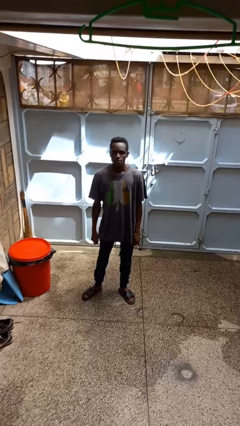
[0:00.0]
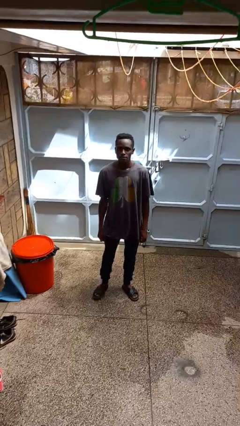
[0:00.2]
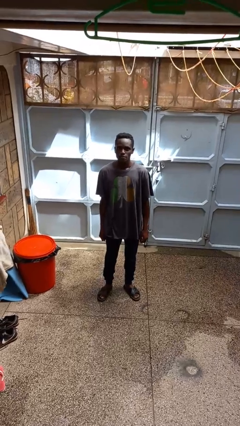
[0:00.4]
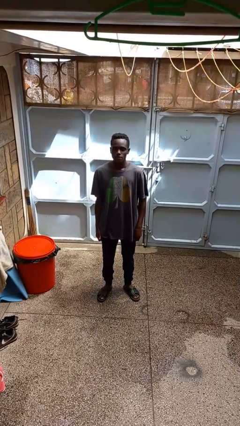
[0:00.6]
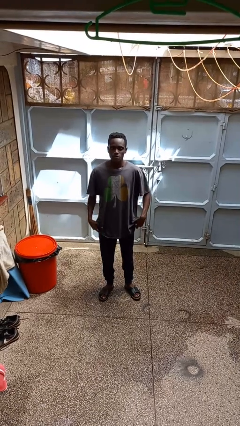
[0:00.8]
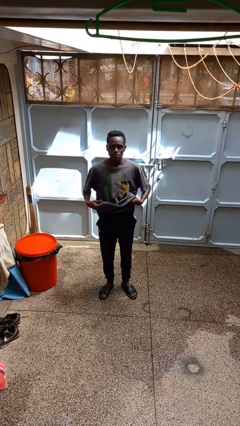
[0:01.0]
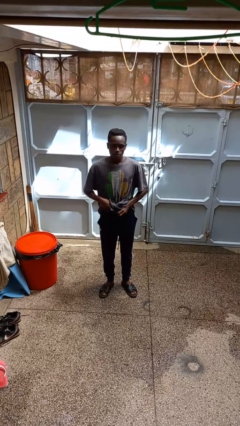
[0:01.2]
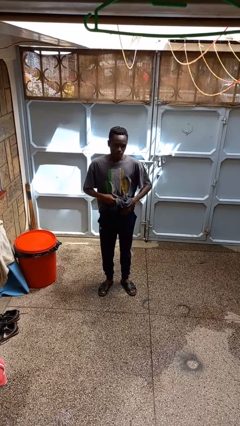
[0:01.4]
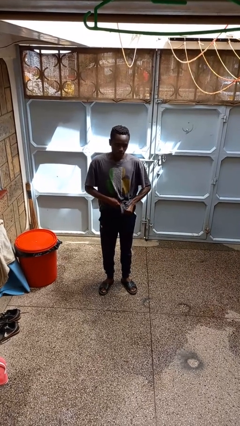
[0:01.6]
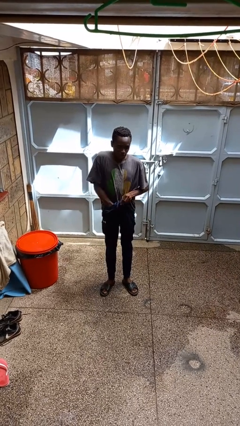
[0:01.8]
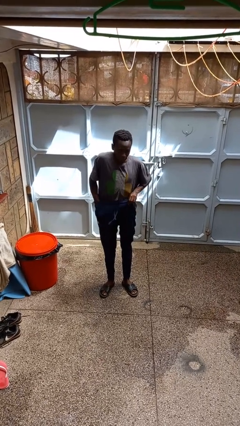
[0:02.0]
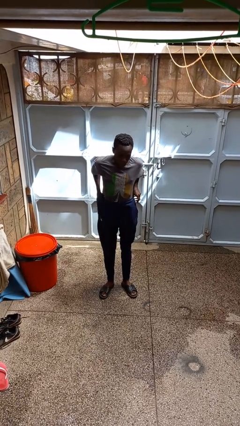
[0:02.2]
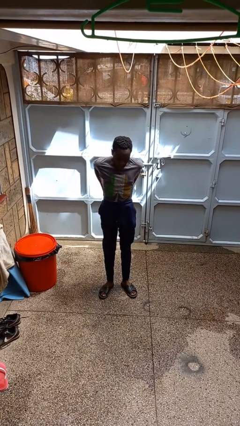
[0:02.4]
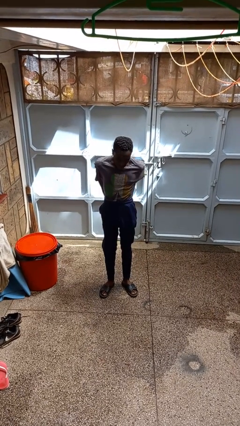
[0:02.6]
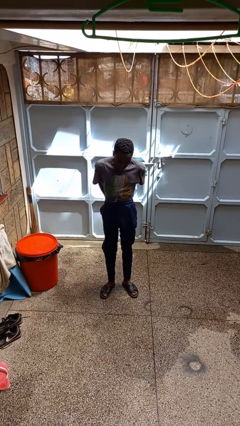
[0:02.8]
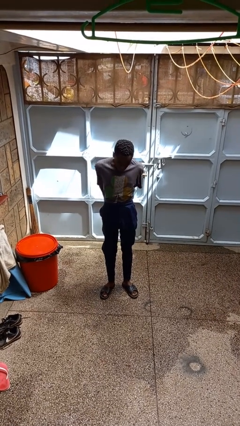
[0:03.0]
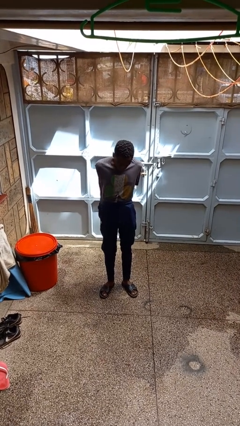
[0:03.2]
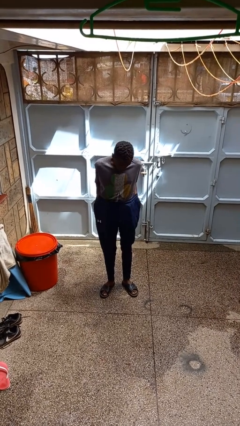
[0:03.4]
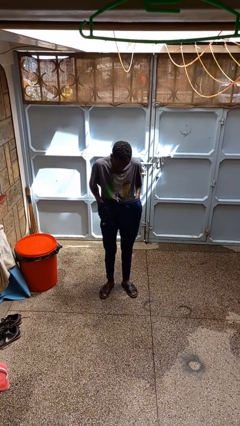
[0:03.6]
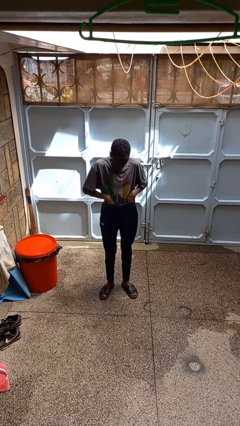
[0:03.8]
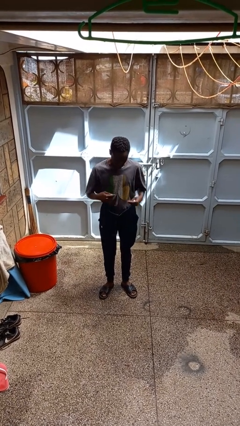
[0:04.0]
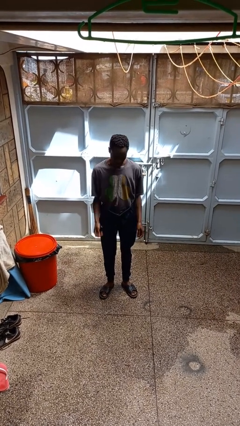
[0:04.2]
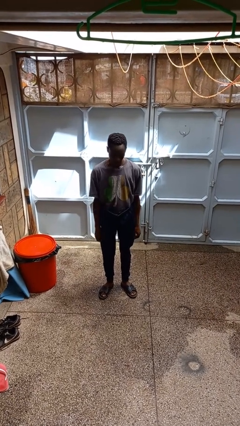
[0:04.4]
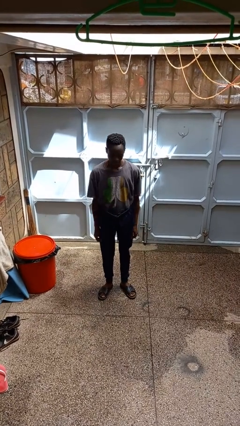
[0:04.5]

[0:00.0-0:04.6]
person tucks in shirt

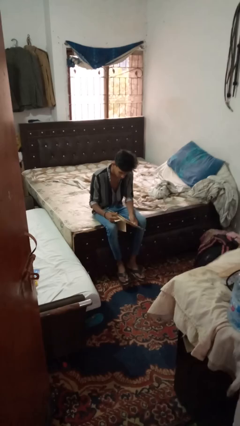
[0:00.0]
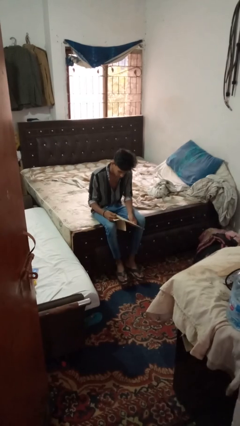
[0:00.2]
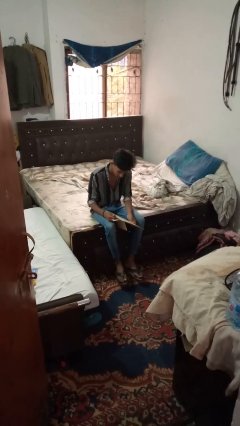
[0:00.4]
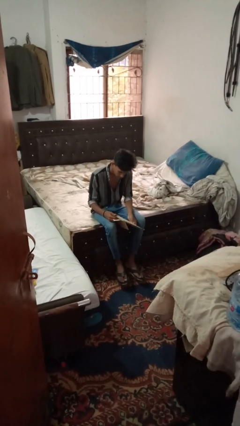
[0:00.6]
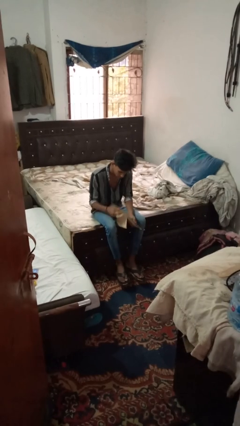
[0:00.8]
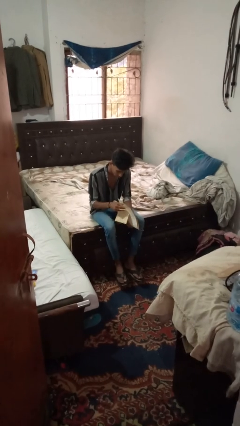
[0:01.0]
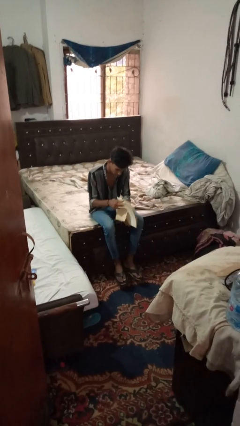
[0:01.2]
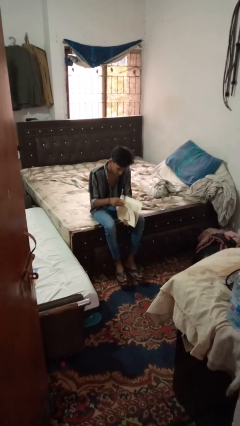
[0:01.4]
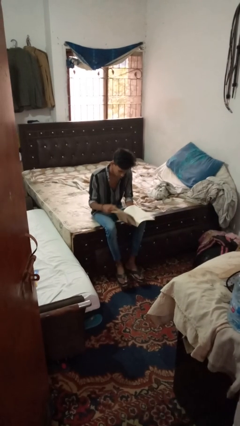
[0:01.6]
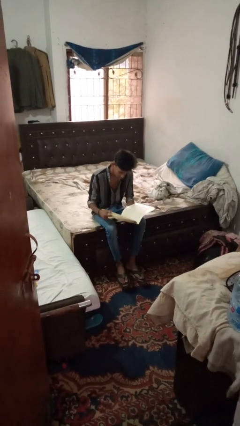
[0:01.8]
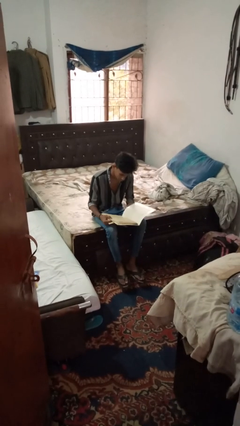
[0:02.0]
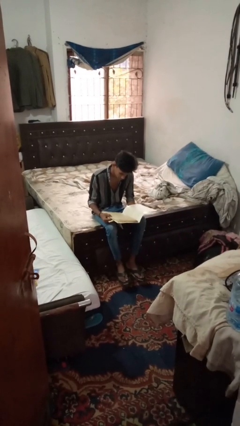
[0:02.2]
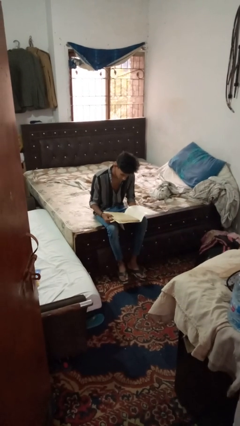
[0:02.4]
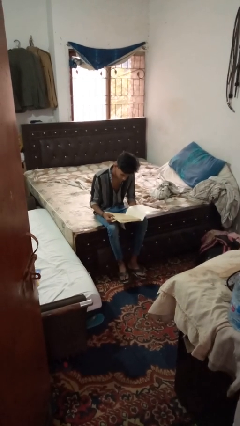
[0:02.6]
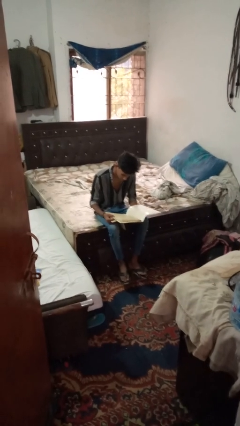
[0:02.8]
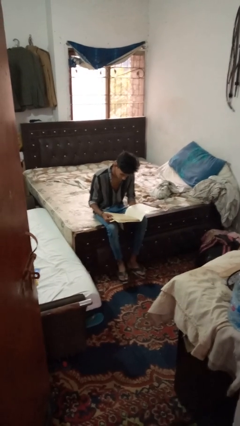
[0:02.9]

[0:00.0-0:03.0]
person reads magazine

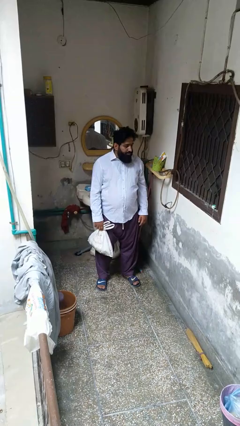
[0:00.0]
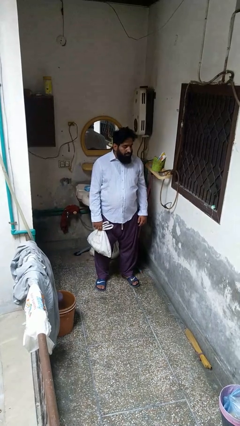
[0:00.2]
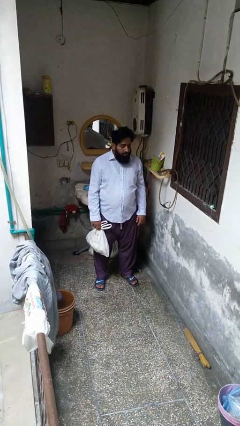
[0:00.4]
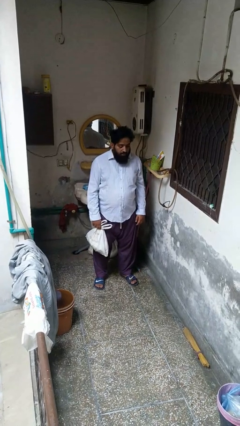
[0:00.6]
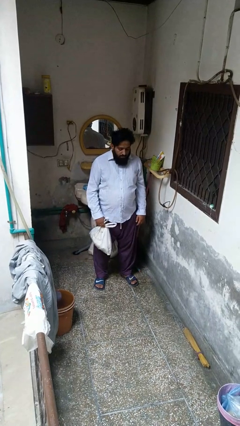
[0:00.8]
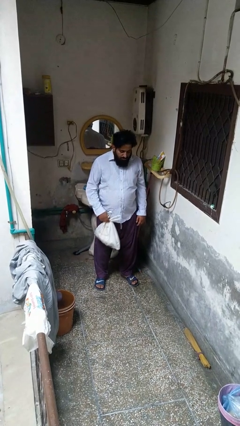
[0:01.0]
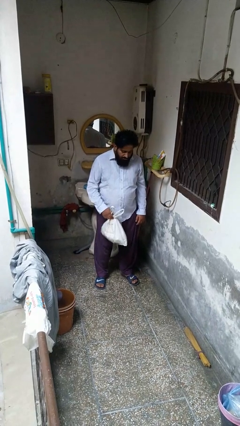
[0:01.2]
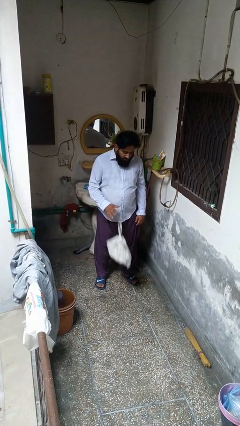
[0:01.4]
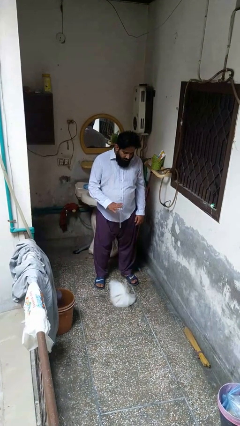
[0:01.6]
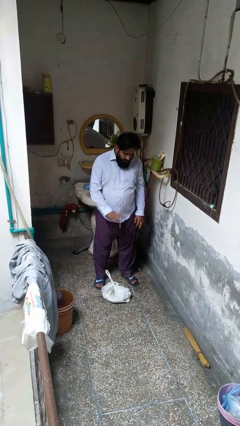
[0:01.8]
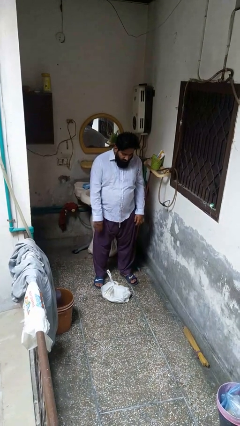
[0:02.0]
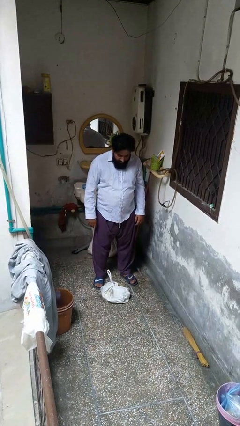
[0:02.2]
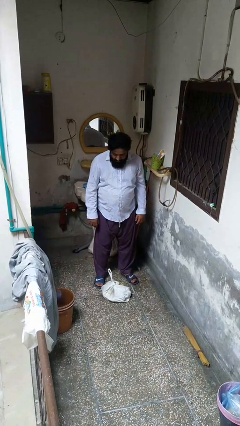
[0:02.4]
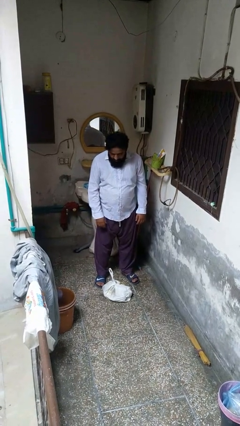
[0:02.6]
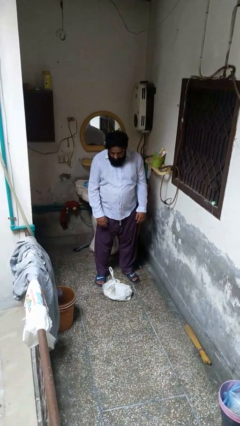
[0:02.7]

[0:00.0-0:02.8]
person throws object to ground

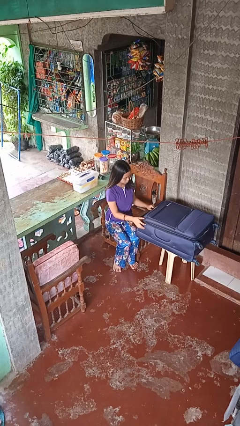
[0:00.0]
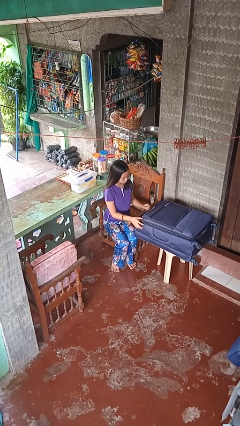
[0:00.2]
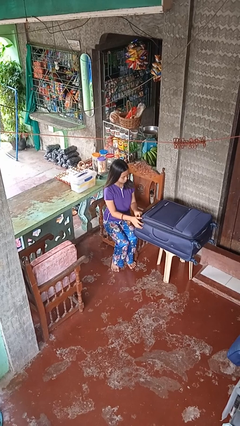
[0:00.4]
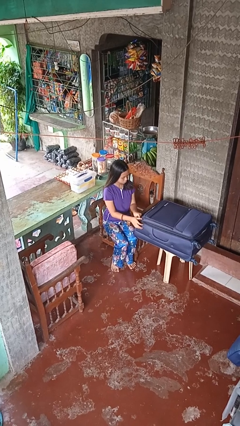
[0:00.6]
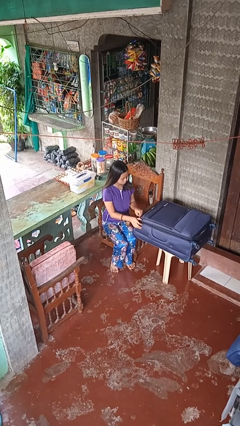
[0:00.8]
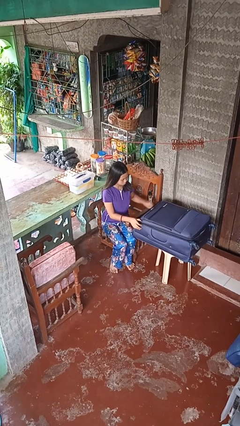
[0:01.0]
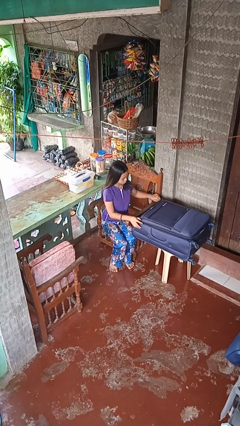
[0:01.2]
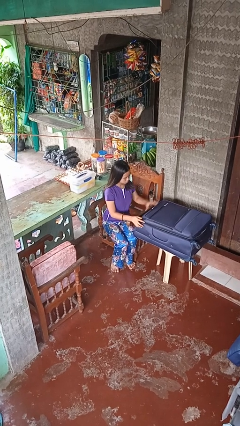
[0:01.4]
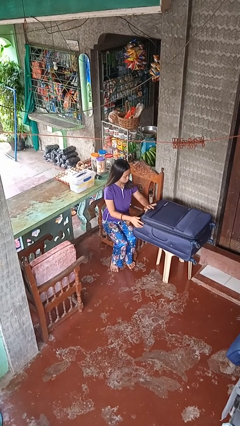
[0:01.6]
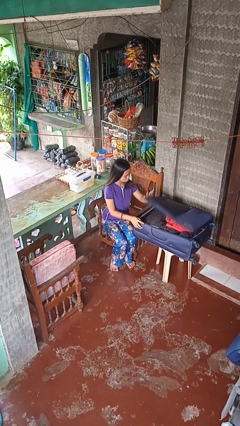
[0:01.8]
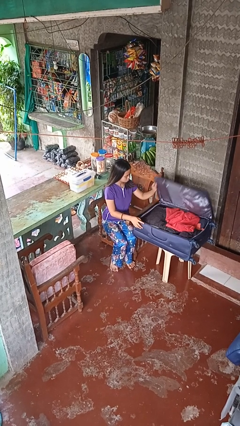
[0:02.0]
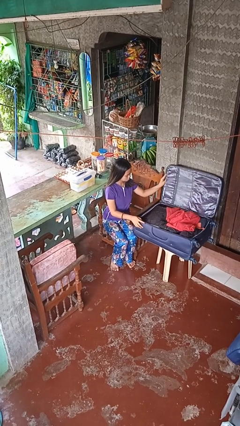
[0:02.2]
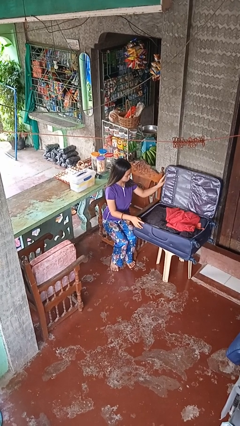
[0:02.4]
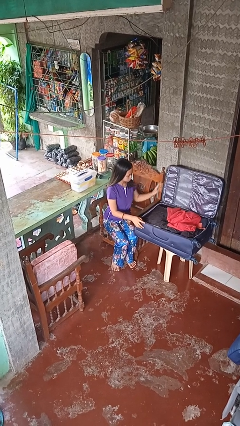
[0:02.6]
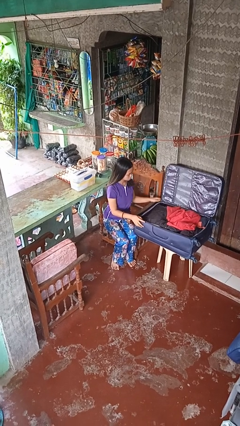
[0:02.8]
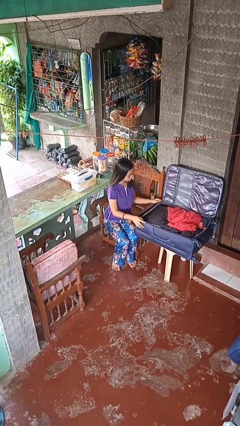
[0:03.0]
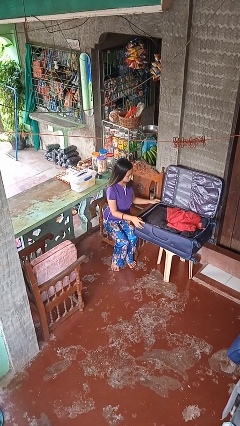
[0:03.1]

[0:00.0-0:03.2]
person opens suitcase

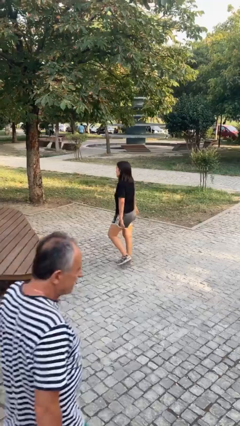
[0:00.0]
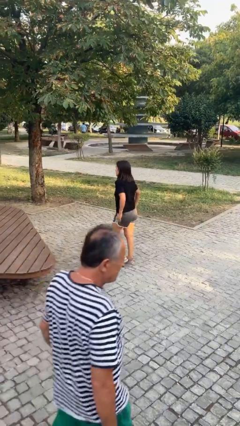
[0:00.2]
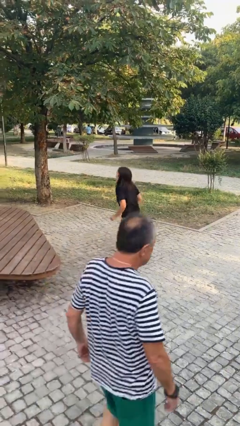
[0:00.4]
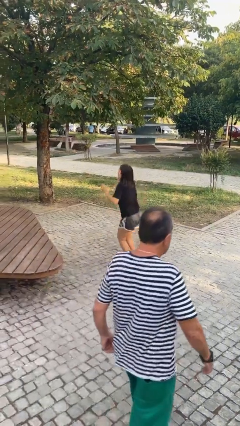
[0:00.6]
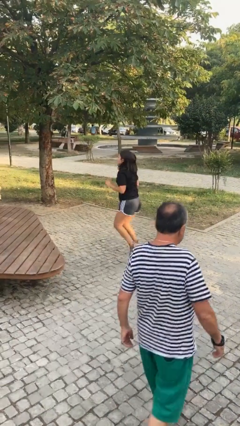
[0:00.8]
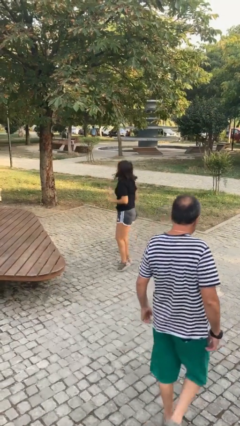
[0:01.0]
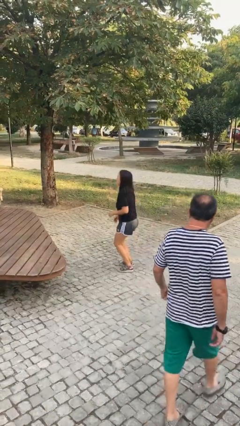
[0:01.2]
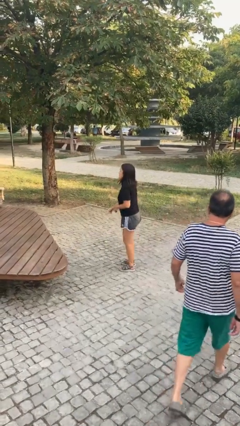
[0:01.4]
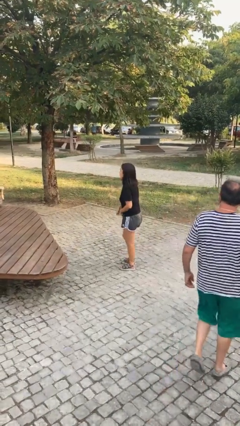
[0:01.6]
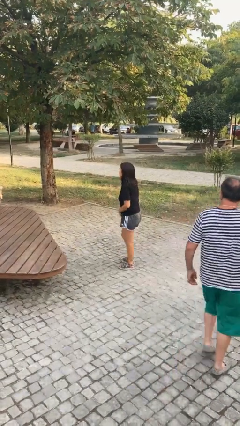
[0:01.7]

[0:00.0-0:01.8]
person jumps

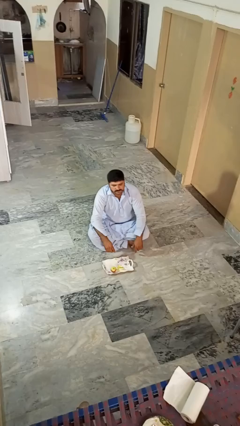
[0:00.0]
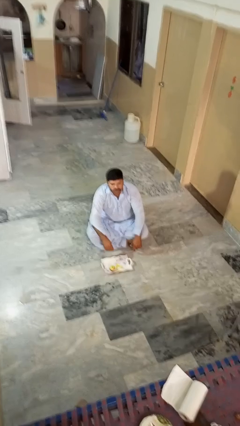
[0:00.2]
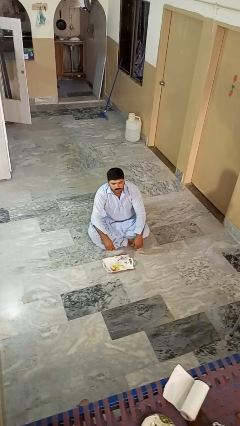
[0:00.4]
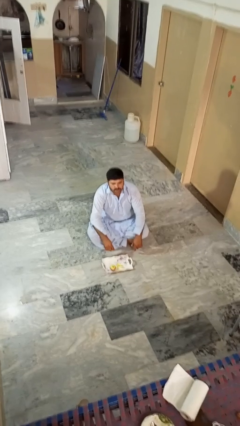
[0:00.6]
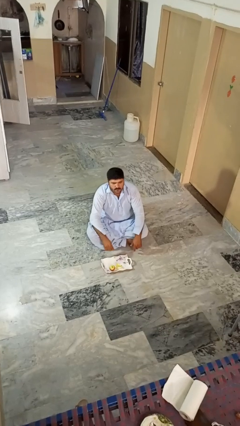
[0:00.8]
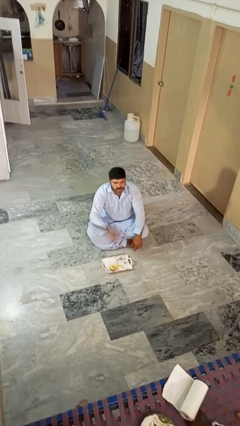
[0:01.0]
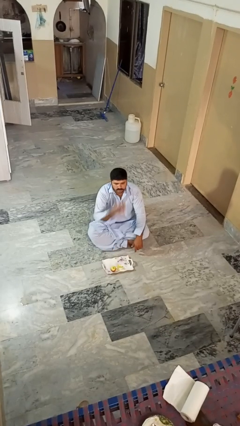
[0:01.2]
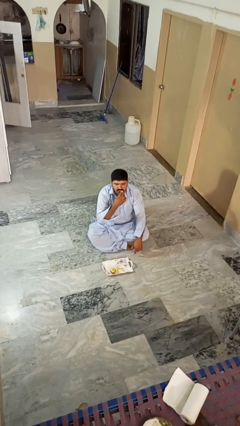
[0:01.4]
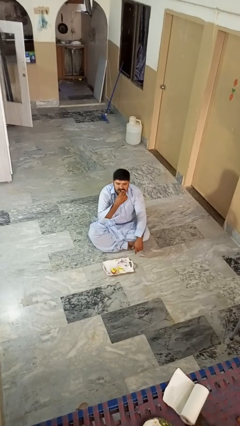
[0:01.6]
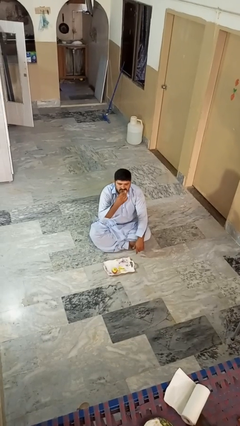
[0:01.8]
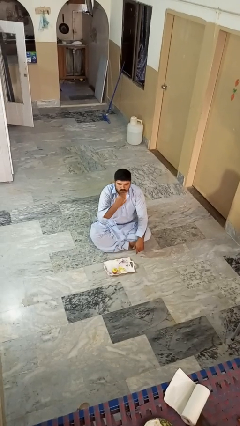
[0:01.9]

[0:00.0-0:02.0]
person eats apple
